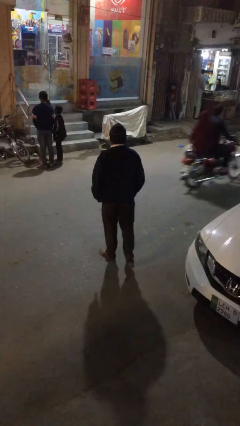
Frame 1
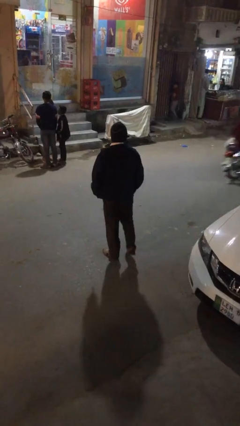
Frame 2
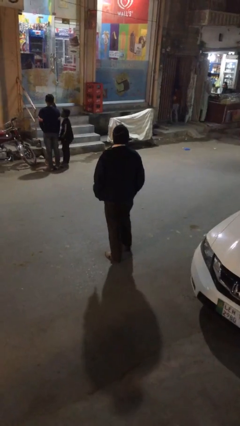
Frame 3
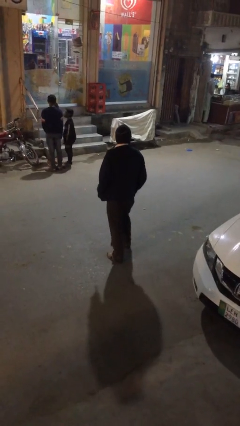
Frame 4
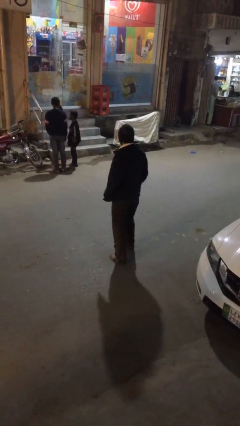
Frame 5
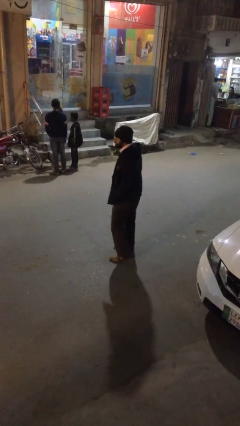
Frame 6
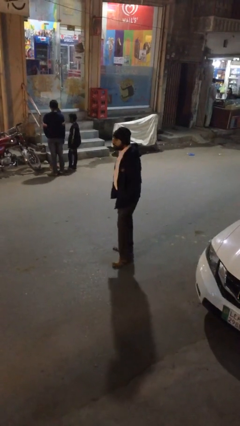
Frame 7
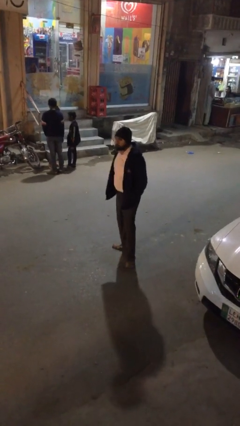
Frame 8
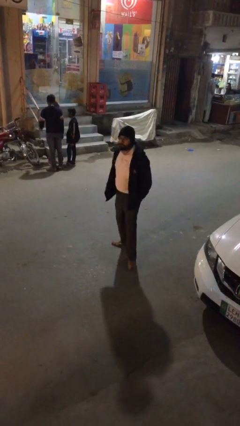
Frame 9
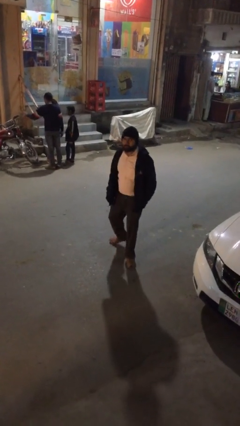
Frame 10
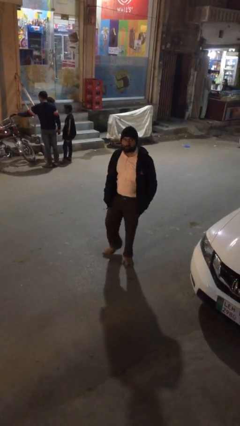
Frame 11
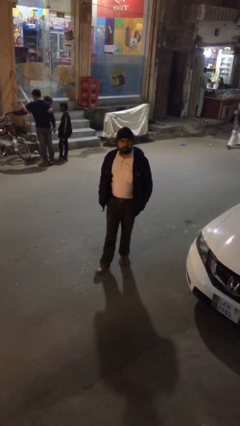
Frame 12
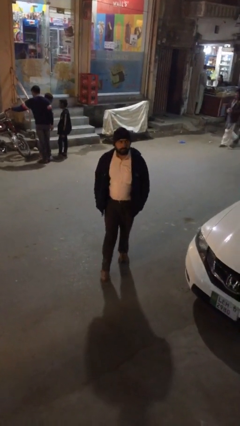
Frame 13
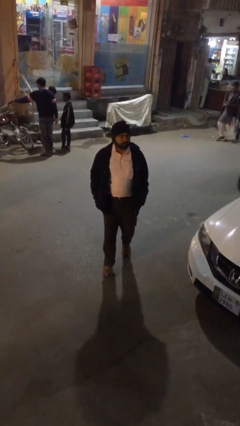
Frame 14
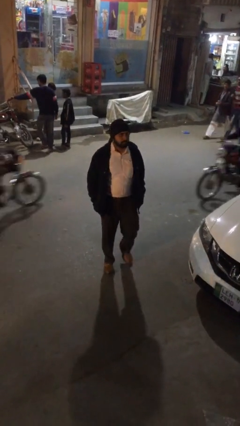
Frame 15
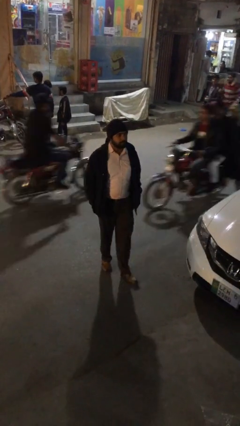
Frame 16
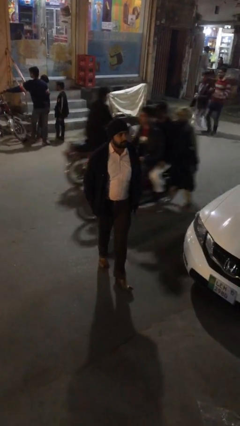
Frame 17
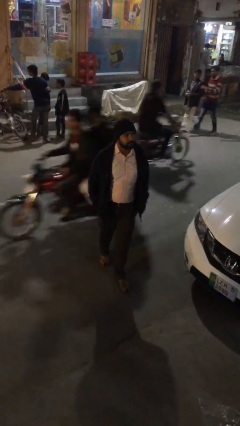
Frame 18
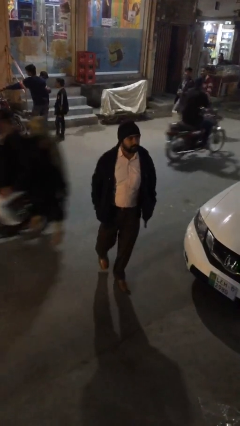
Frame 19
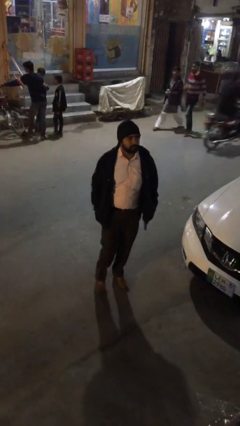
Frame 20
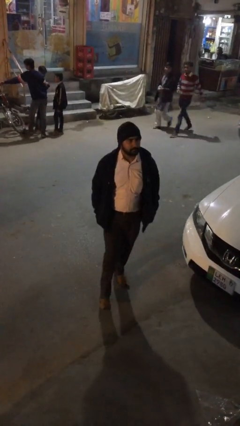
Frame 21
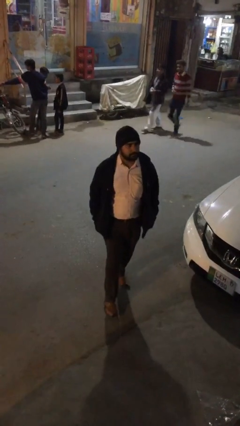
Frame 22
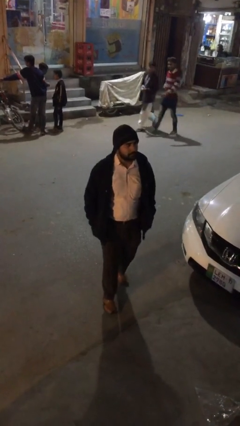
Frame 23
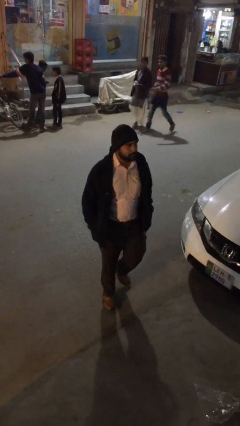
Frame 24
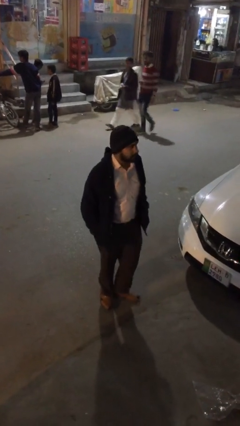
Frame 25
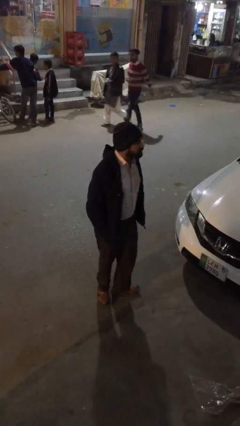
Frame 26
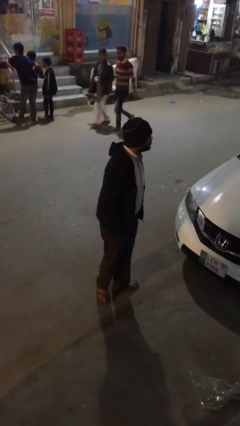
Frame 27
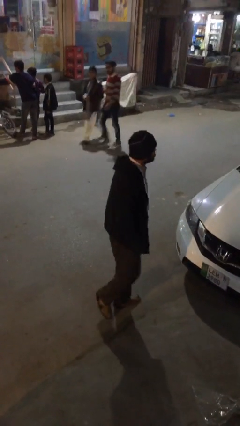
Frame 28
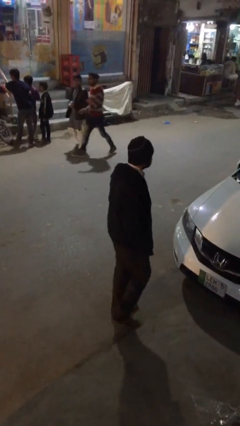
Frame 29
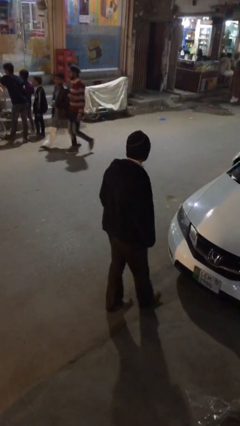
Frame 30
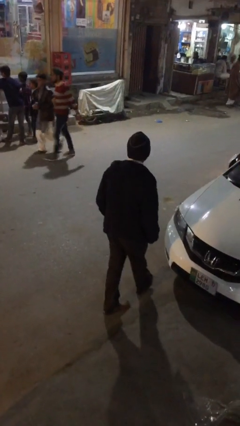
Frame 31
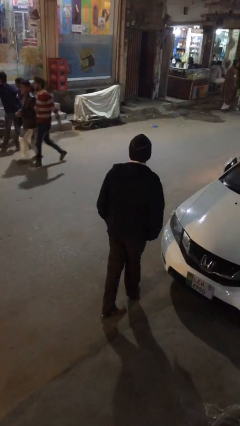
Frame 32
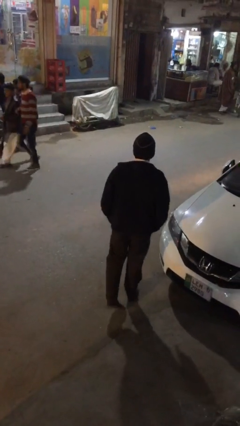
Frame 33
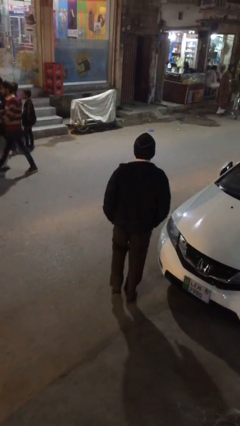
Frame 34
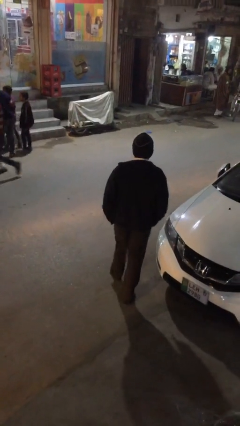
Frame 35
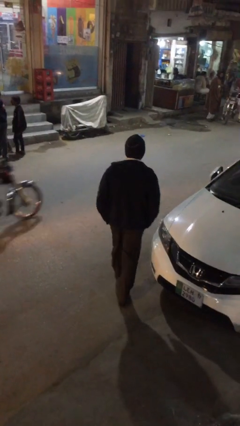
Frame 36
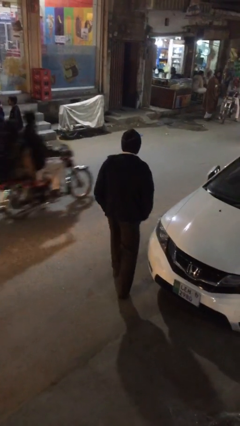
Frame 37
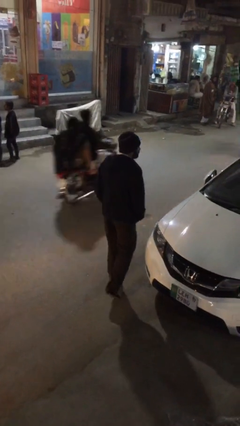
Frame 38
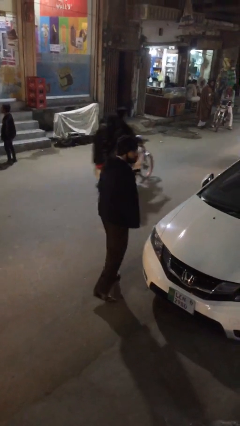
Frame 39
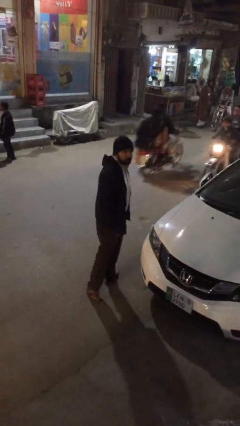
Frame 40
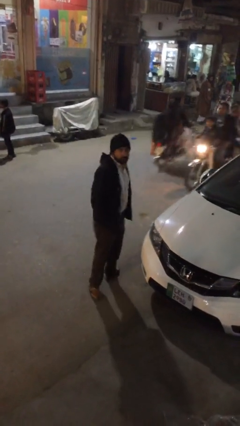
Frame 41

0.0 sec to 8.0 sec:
person walks

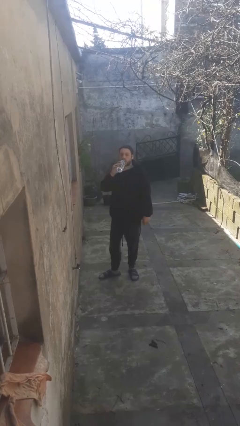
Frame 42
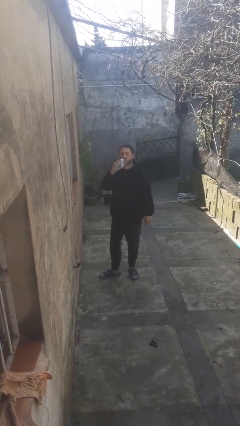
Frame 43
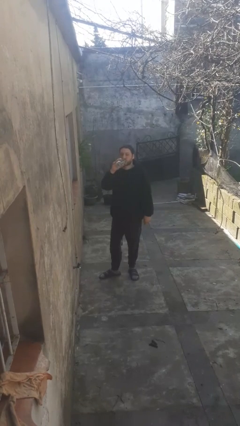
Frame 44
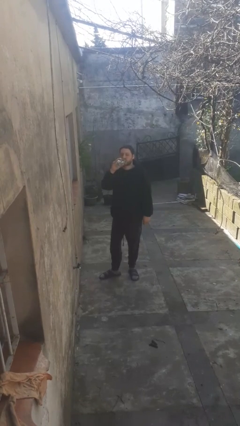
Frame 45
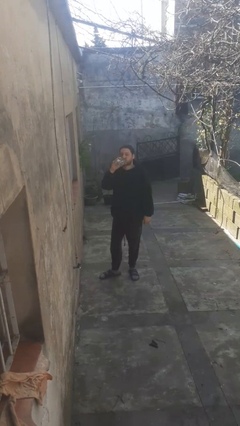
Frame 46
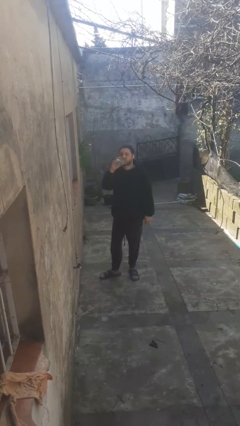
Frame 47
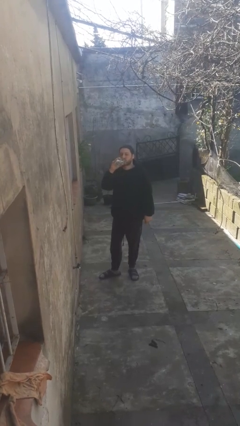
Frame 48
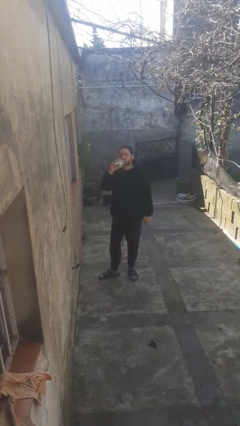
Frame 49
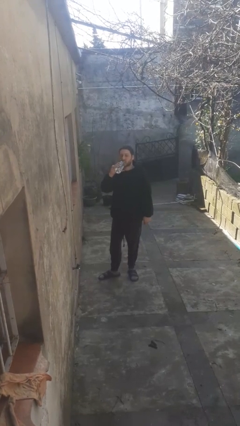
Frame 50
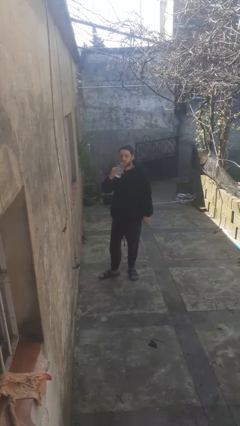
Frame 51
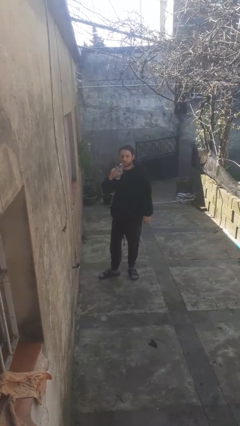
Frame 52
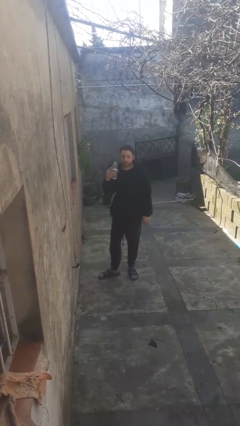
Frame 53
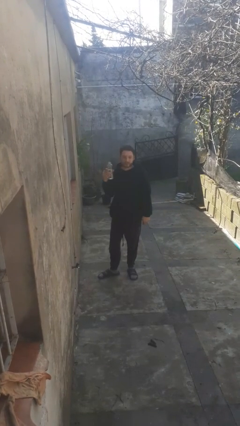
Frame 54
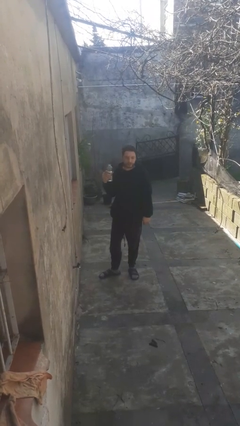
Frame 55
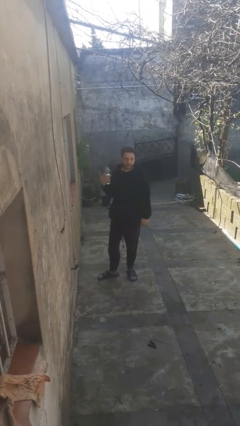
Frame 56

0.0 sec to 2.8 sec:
person drinks from bottle

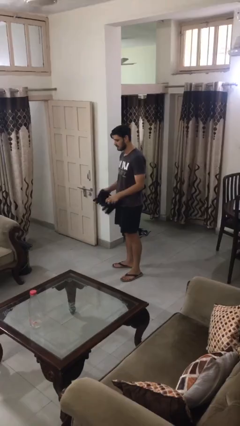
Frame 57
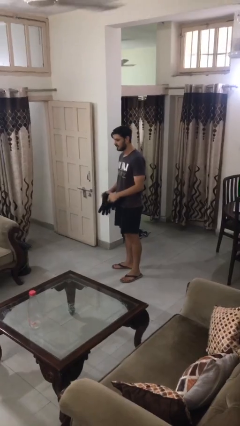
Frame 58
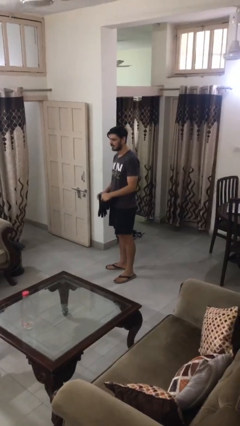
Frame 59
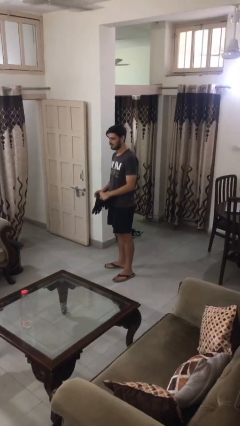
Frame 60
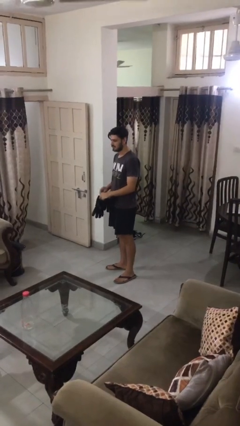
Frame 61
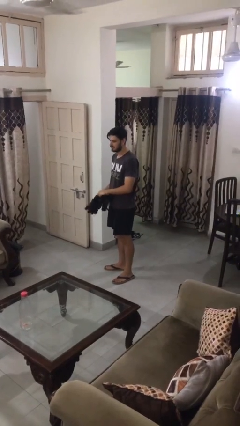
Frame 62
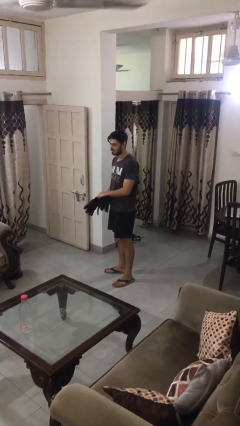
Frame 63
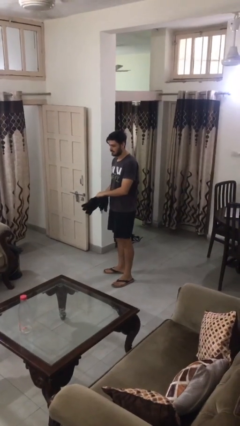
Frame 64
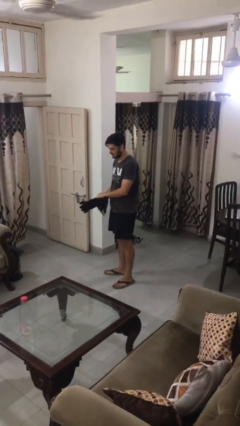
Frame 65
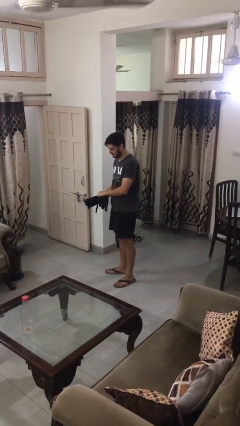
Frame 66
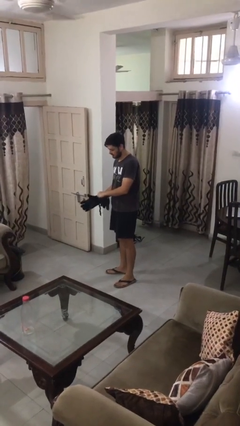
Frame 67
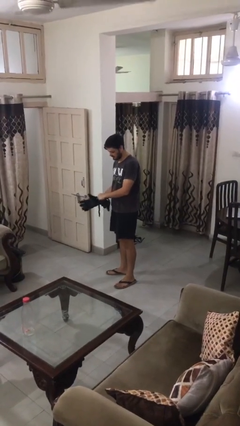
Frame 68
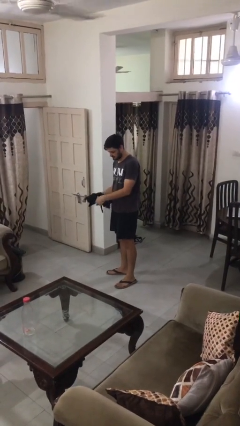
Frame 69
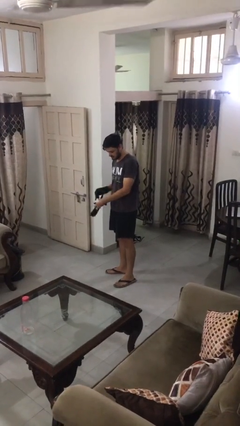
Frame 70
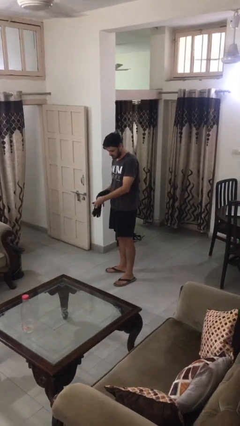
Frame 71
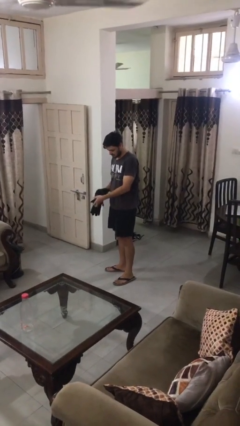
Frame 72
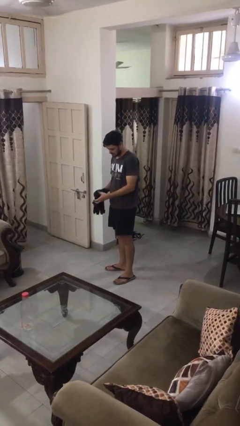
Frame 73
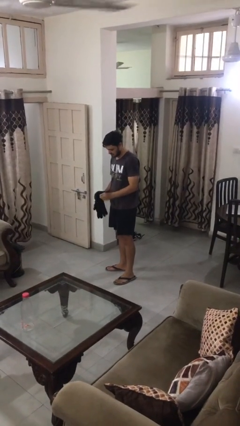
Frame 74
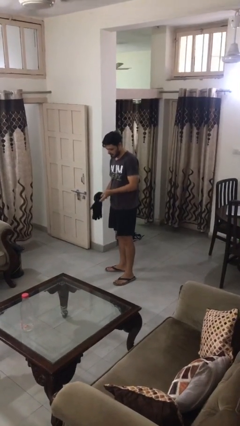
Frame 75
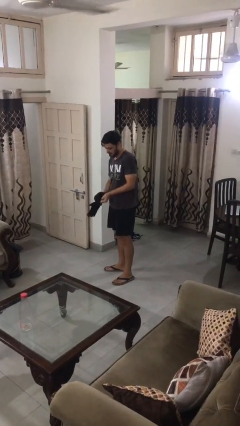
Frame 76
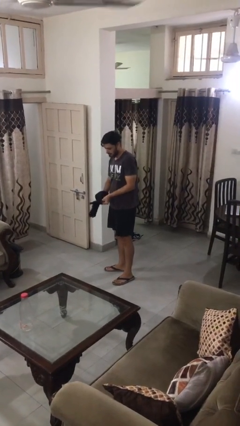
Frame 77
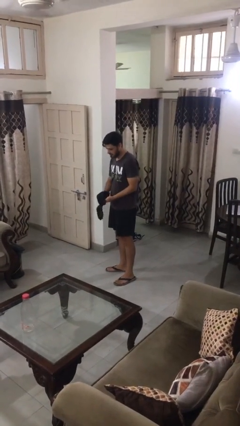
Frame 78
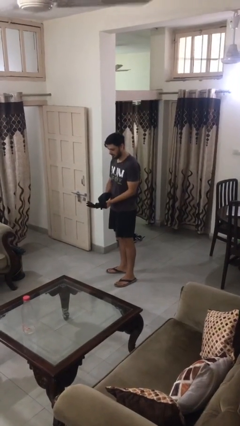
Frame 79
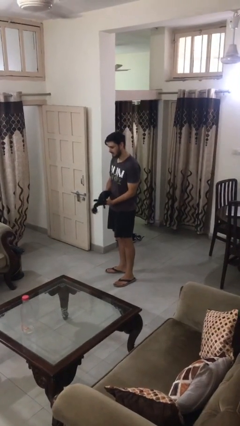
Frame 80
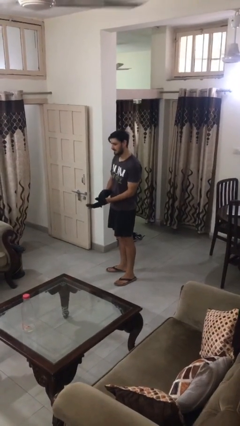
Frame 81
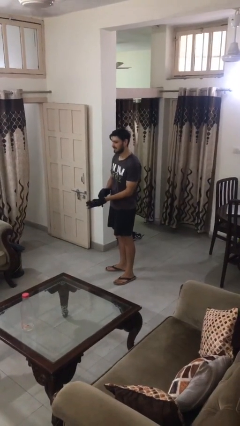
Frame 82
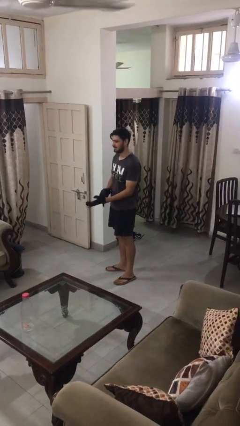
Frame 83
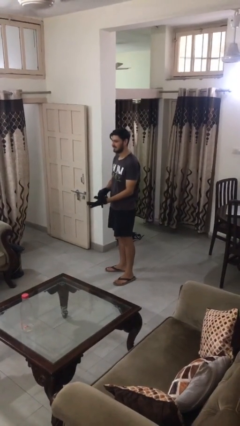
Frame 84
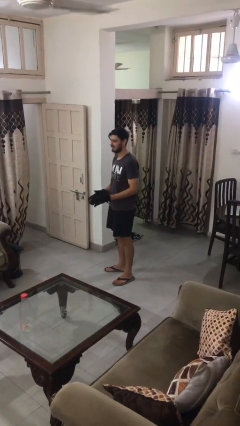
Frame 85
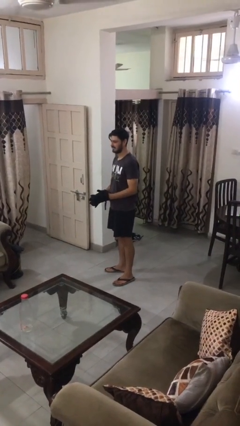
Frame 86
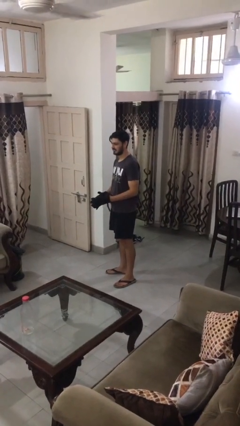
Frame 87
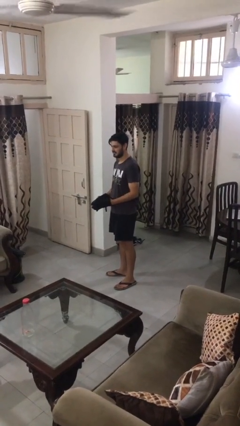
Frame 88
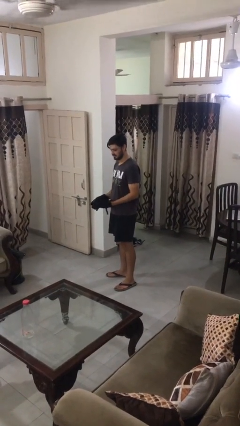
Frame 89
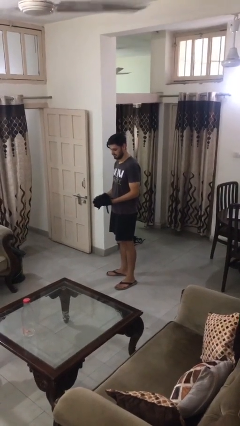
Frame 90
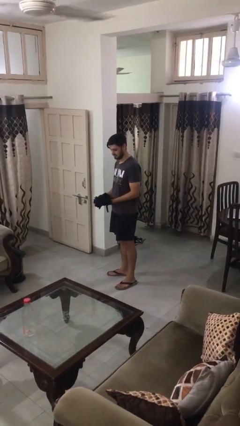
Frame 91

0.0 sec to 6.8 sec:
person puts on gloves

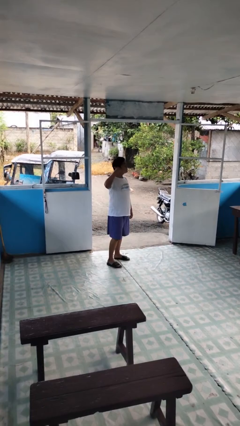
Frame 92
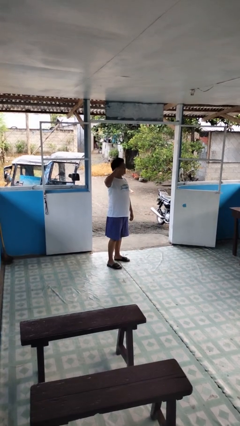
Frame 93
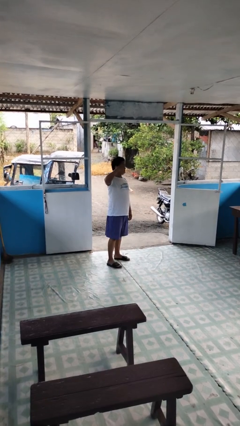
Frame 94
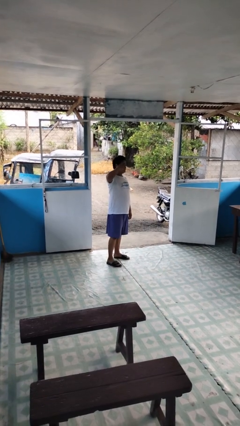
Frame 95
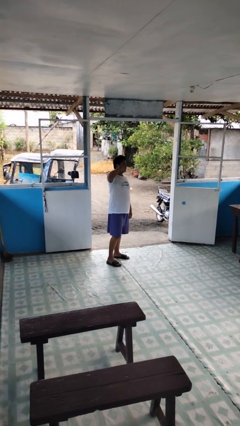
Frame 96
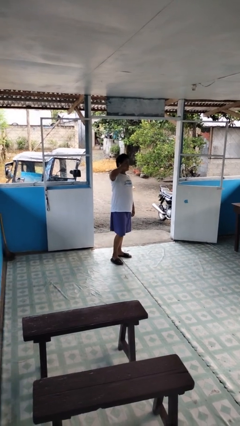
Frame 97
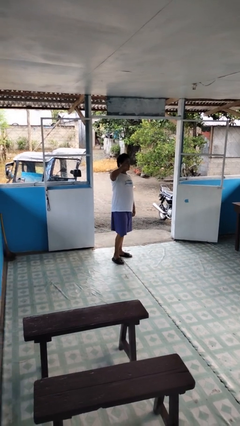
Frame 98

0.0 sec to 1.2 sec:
person gestures call me
